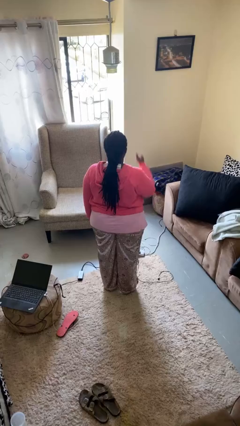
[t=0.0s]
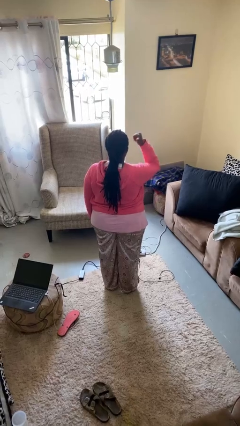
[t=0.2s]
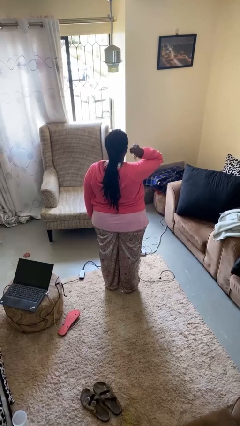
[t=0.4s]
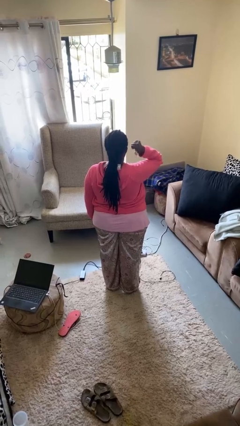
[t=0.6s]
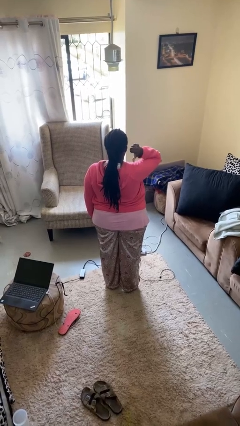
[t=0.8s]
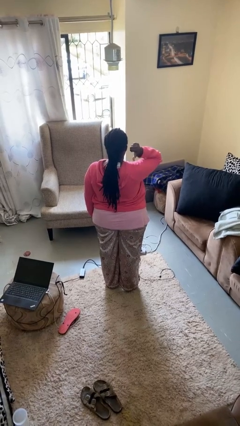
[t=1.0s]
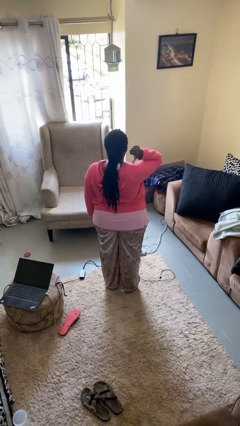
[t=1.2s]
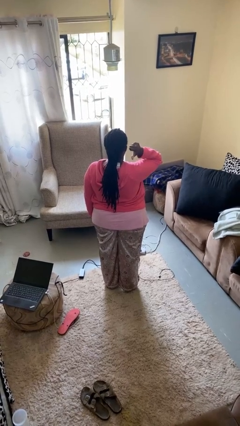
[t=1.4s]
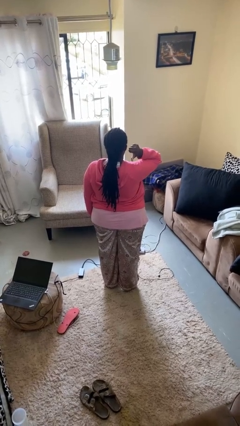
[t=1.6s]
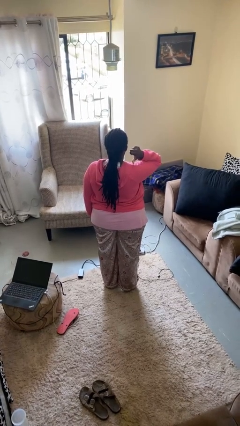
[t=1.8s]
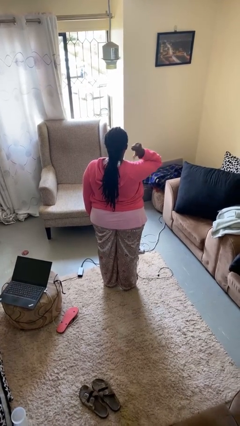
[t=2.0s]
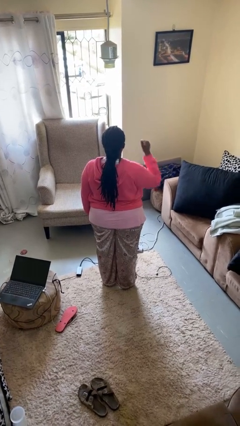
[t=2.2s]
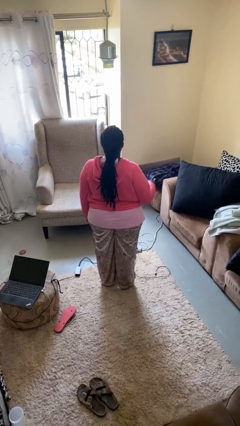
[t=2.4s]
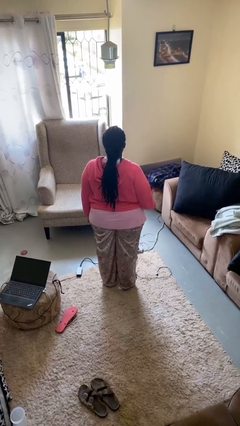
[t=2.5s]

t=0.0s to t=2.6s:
person gestures behind me

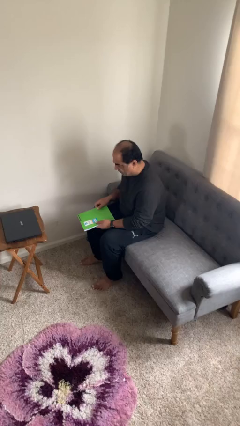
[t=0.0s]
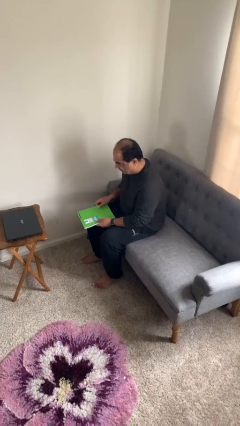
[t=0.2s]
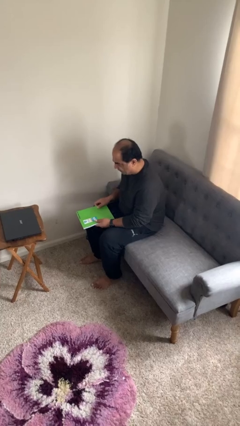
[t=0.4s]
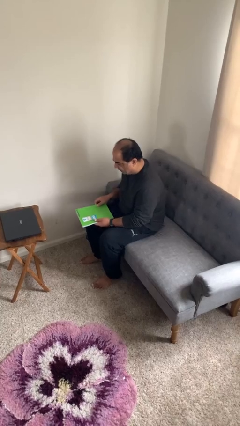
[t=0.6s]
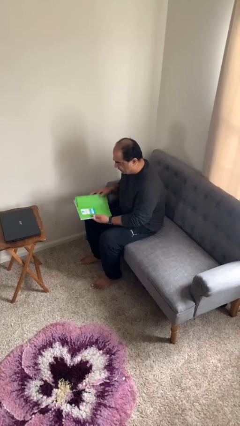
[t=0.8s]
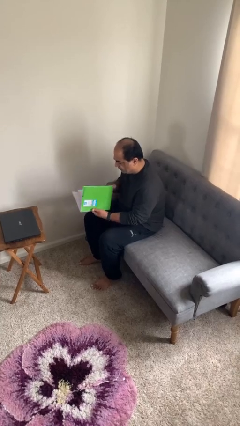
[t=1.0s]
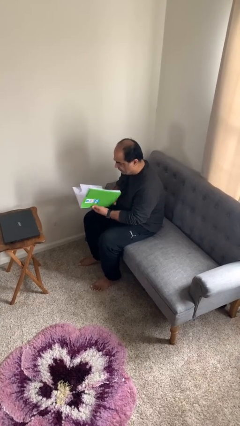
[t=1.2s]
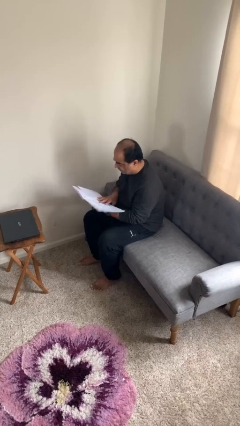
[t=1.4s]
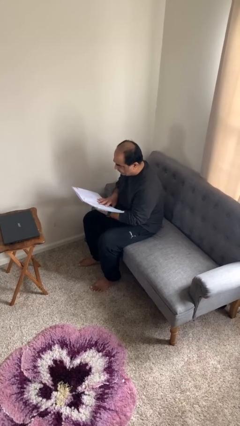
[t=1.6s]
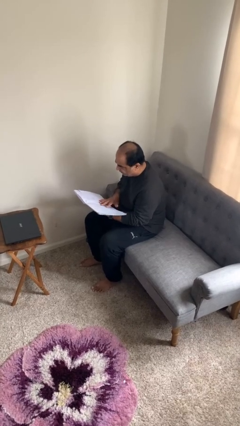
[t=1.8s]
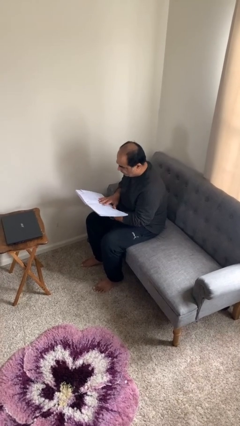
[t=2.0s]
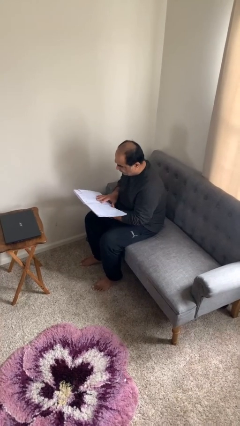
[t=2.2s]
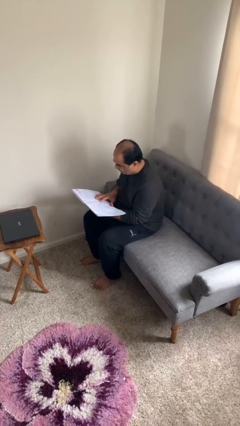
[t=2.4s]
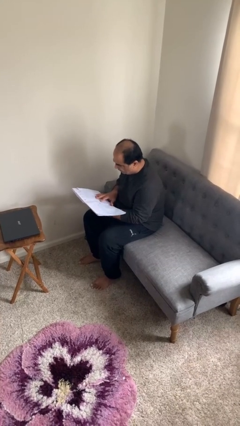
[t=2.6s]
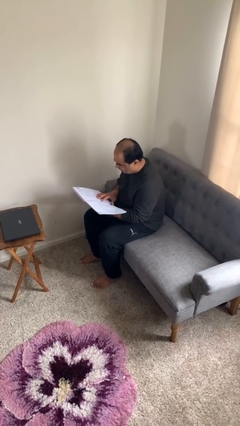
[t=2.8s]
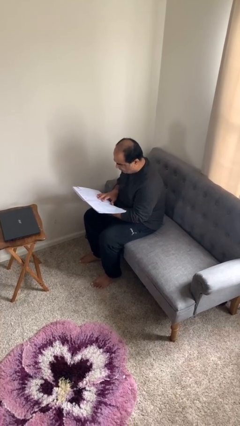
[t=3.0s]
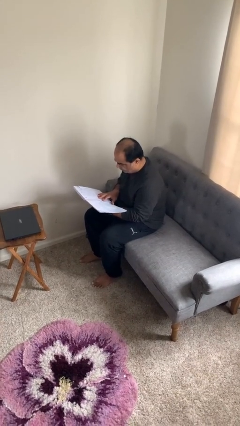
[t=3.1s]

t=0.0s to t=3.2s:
person reads document

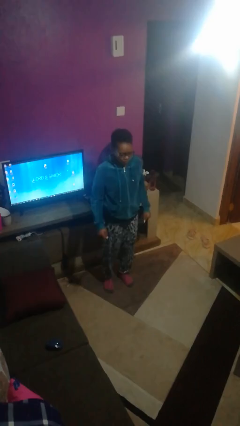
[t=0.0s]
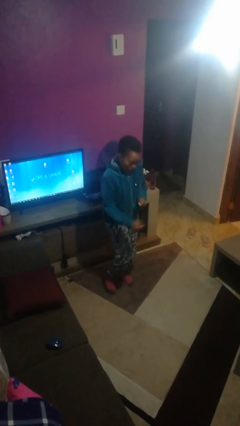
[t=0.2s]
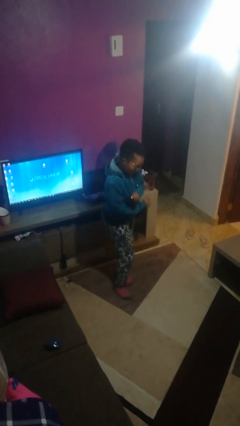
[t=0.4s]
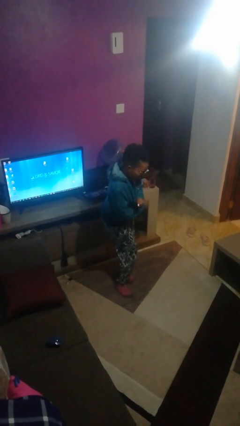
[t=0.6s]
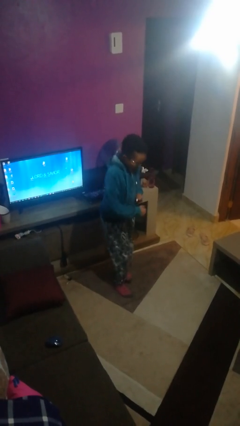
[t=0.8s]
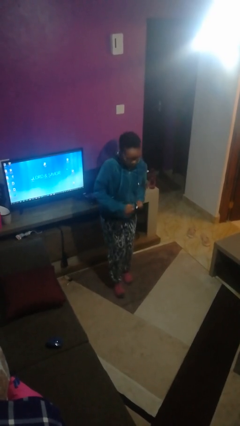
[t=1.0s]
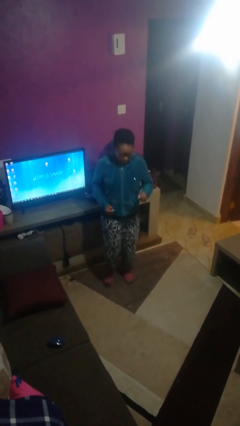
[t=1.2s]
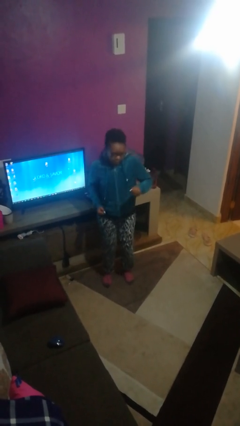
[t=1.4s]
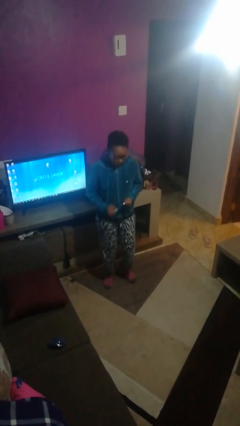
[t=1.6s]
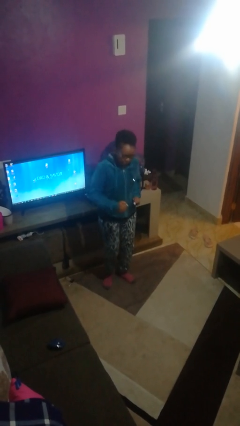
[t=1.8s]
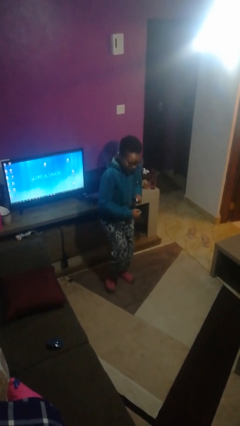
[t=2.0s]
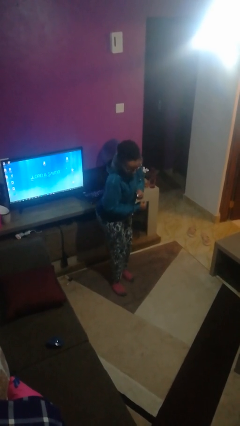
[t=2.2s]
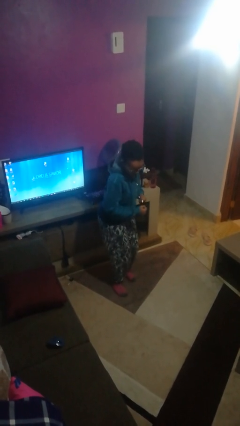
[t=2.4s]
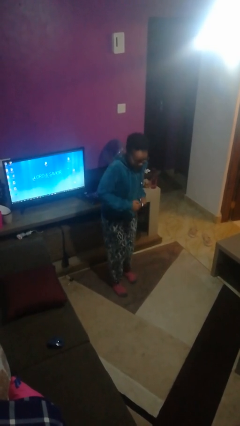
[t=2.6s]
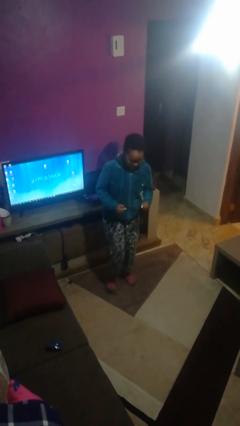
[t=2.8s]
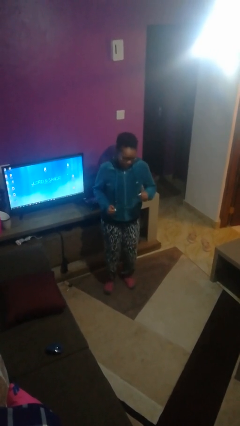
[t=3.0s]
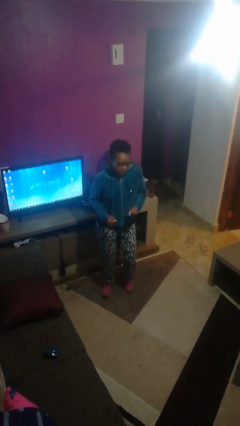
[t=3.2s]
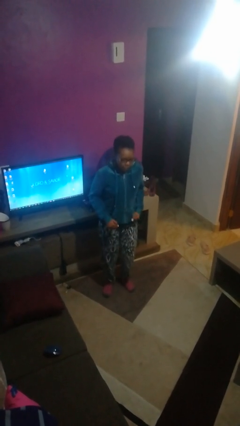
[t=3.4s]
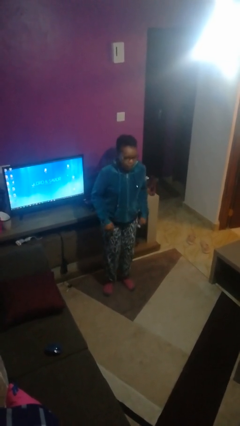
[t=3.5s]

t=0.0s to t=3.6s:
person dances in place

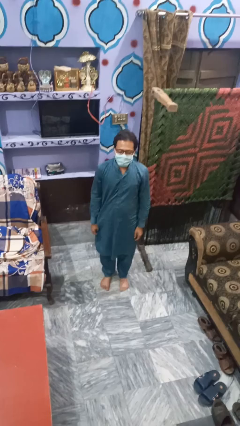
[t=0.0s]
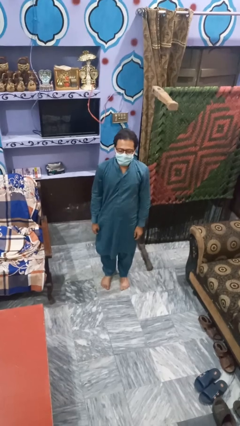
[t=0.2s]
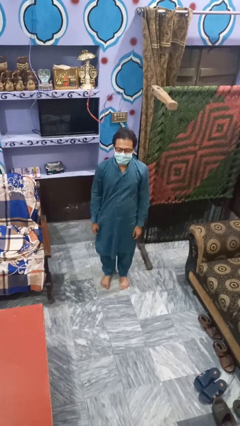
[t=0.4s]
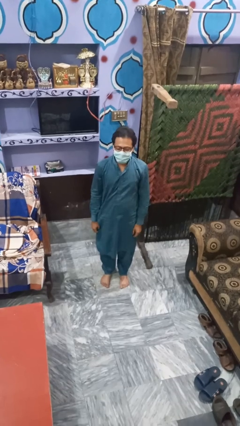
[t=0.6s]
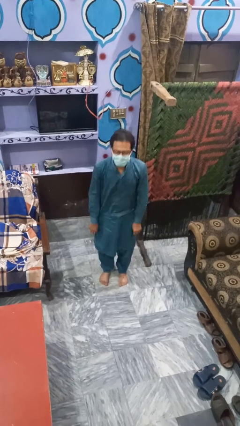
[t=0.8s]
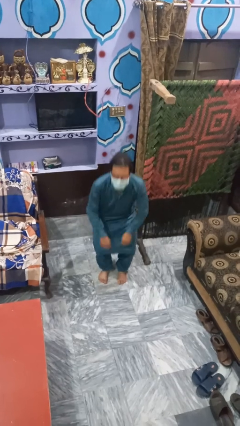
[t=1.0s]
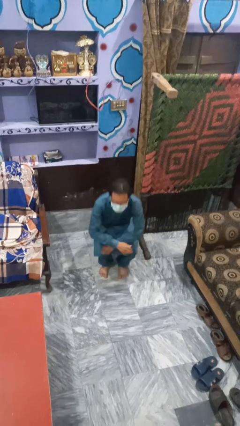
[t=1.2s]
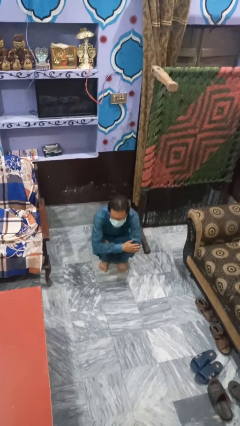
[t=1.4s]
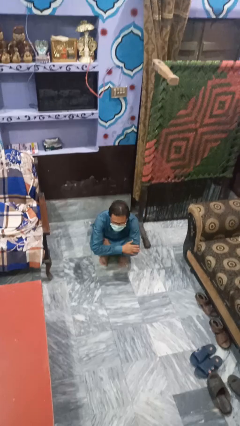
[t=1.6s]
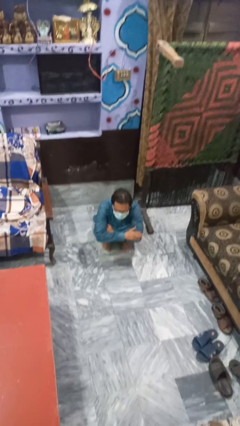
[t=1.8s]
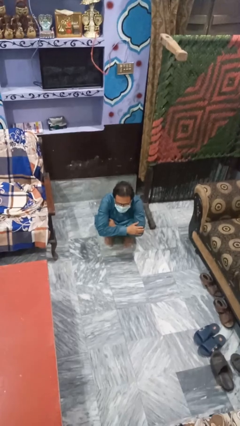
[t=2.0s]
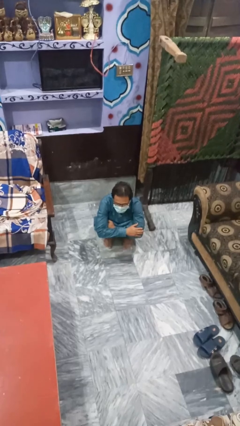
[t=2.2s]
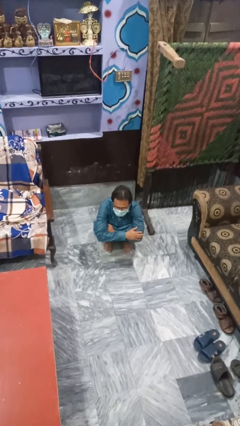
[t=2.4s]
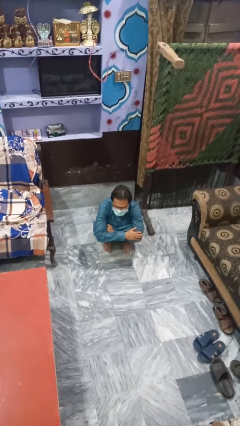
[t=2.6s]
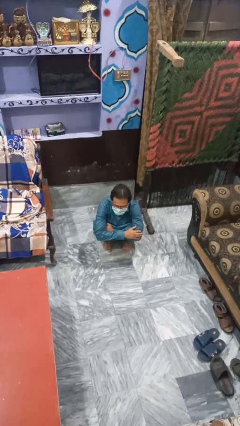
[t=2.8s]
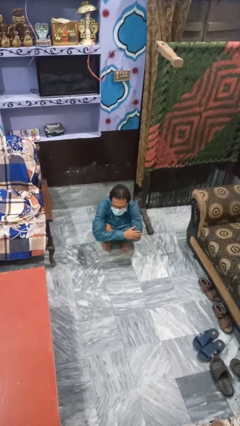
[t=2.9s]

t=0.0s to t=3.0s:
person squats

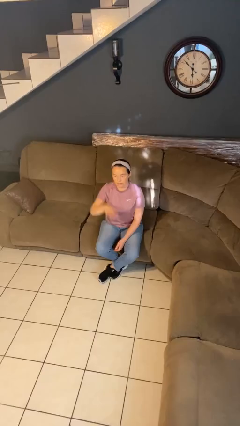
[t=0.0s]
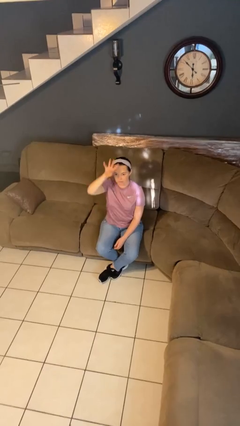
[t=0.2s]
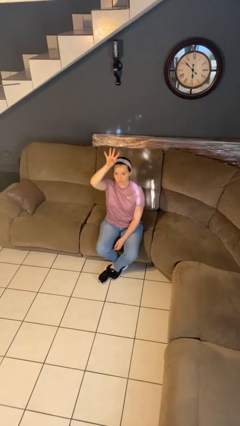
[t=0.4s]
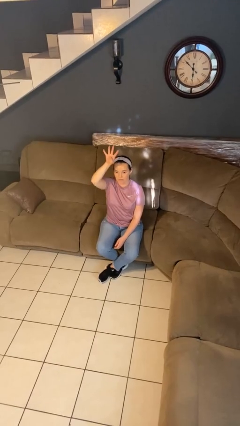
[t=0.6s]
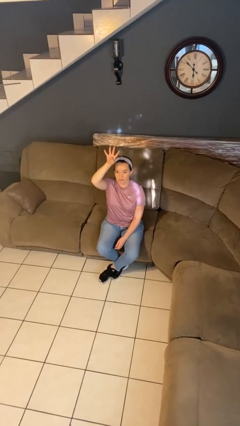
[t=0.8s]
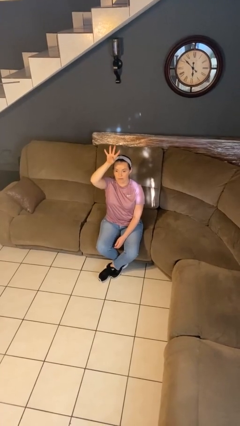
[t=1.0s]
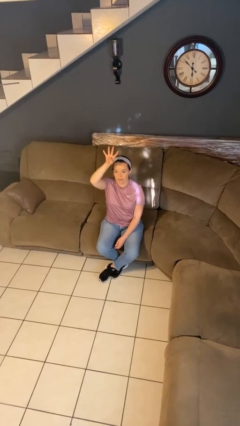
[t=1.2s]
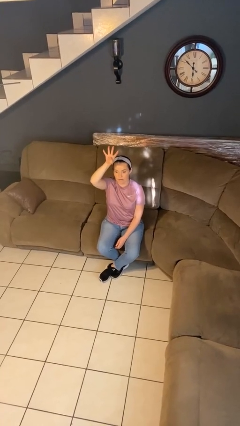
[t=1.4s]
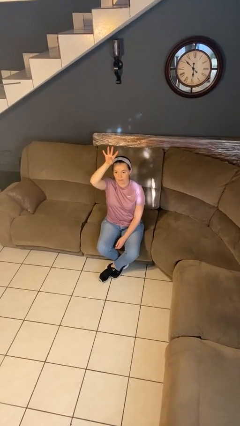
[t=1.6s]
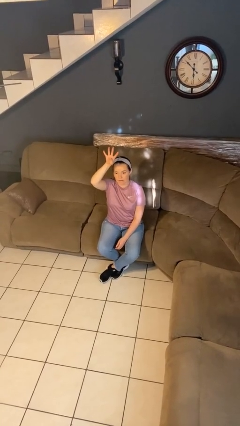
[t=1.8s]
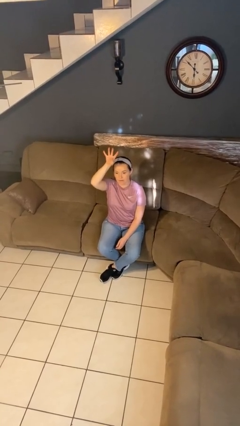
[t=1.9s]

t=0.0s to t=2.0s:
person gestures number four

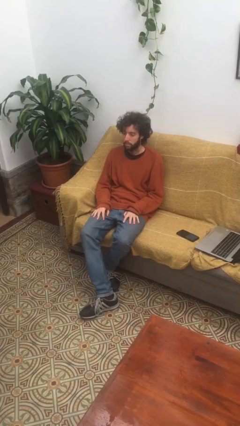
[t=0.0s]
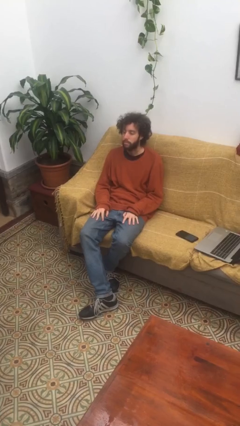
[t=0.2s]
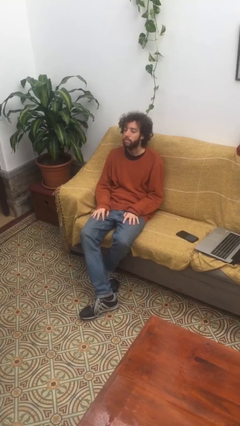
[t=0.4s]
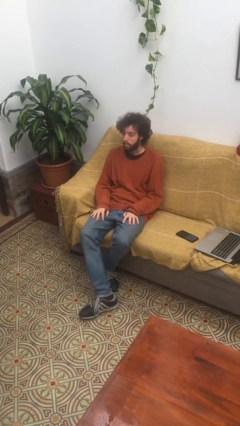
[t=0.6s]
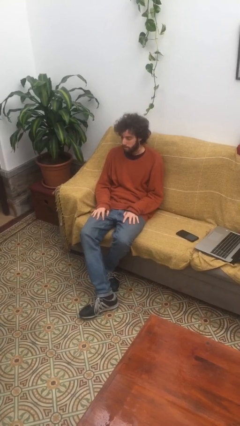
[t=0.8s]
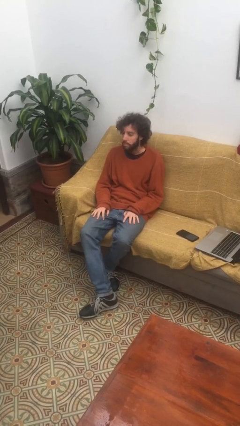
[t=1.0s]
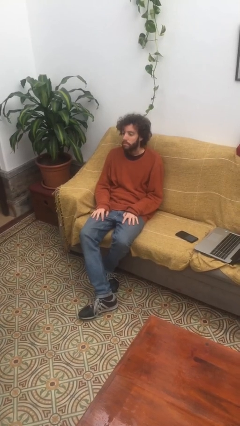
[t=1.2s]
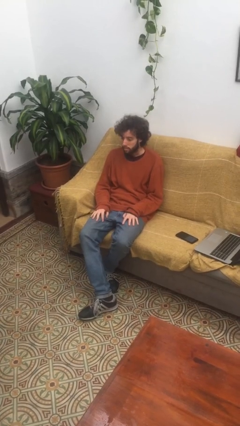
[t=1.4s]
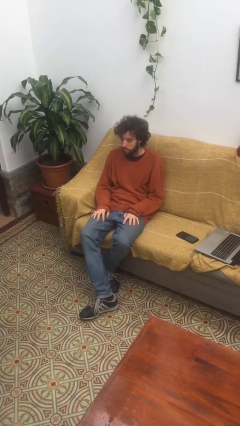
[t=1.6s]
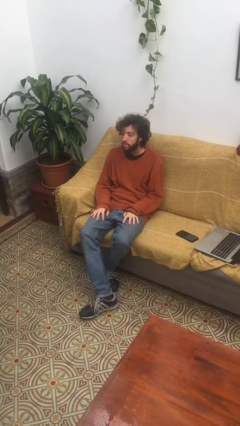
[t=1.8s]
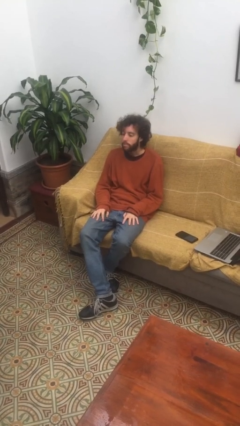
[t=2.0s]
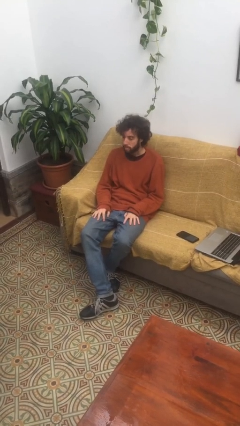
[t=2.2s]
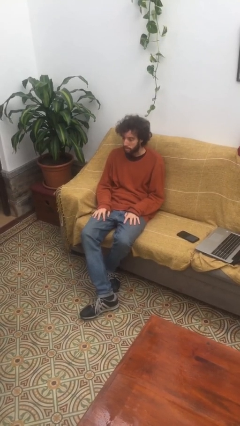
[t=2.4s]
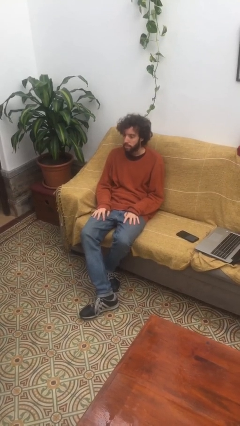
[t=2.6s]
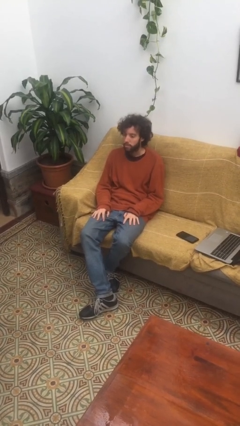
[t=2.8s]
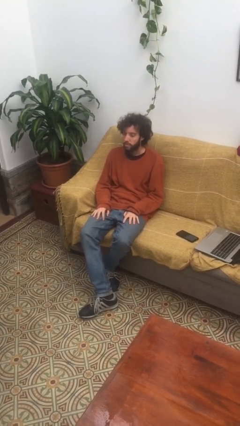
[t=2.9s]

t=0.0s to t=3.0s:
person nods head
